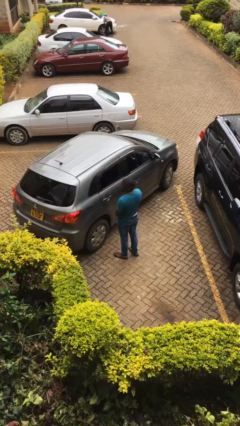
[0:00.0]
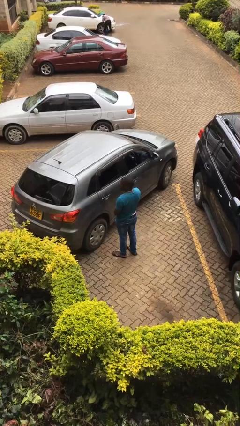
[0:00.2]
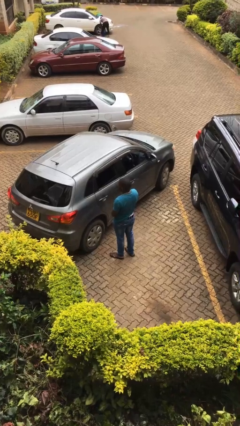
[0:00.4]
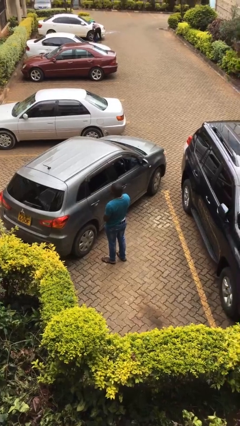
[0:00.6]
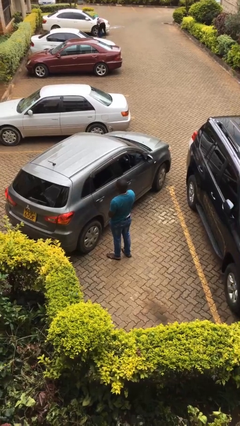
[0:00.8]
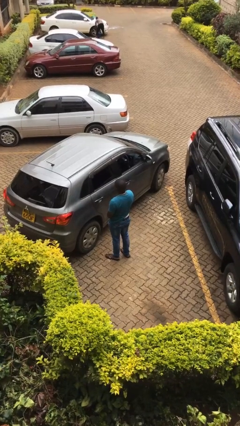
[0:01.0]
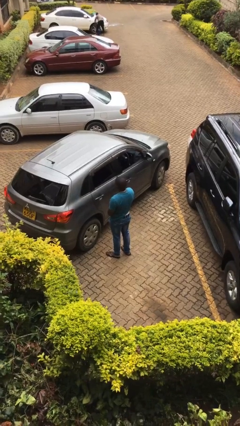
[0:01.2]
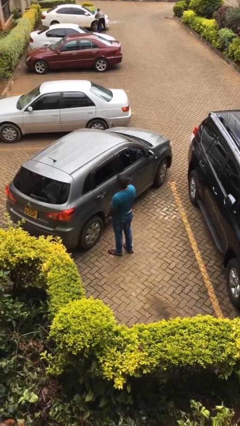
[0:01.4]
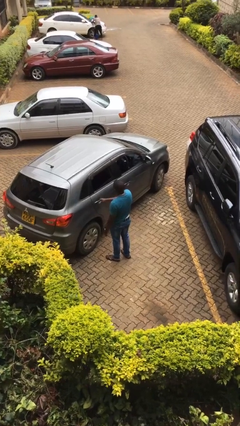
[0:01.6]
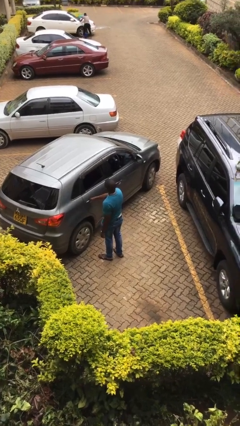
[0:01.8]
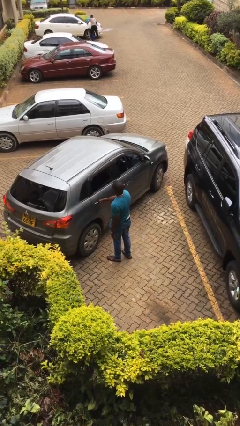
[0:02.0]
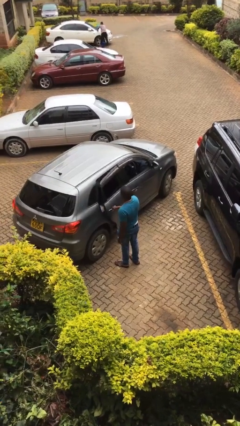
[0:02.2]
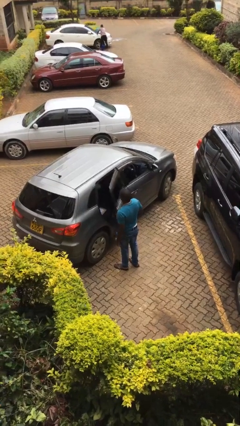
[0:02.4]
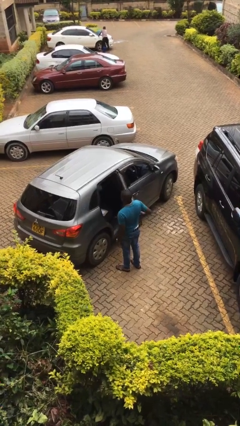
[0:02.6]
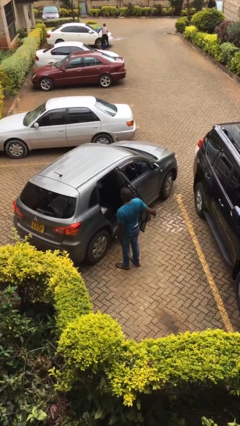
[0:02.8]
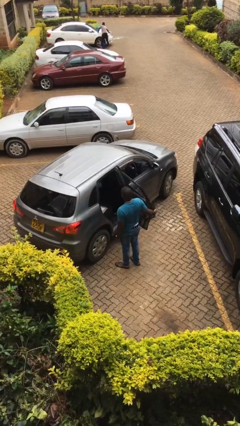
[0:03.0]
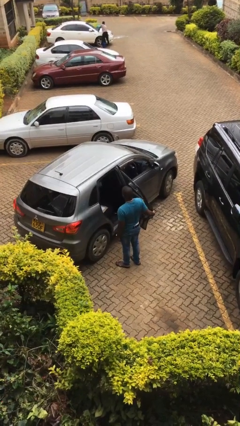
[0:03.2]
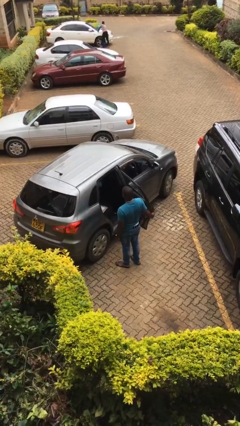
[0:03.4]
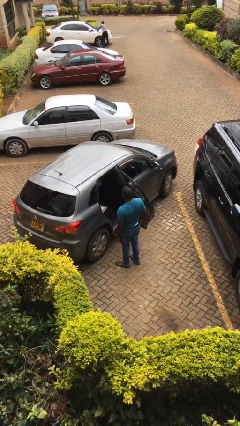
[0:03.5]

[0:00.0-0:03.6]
person opens car door

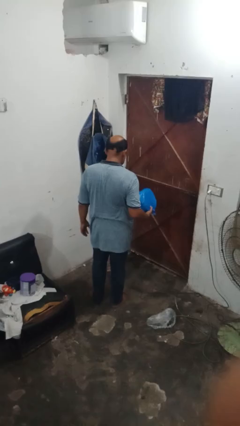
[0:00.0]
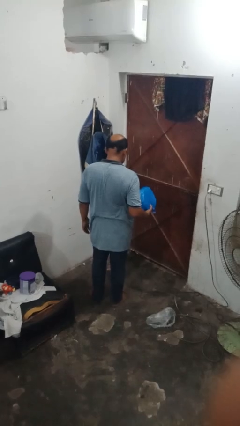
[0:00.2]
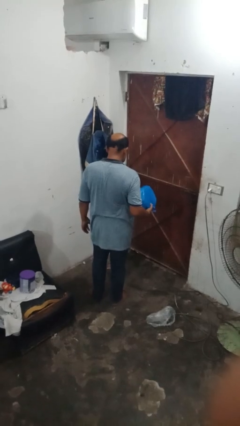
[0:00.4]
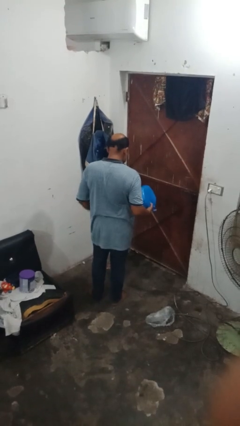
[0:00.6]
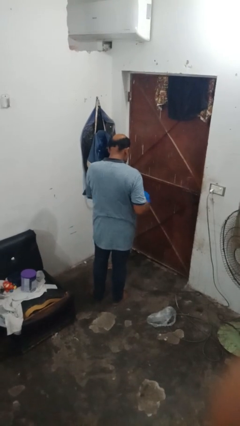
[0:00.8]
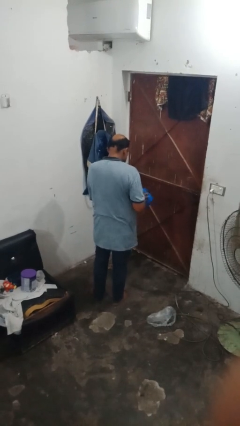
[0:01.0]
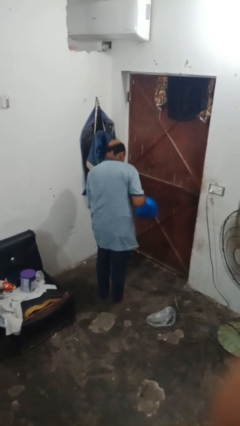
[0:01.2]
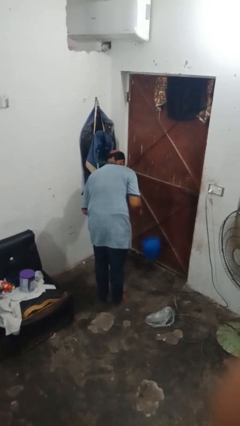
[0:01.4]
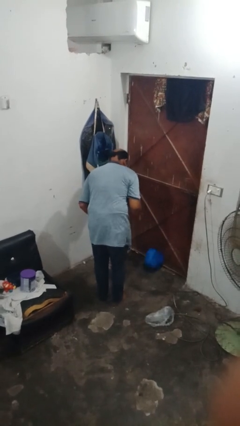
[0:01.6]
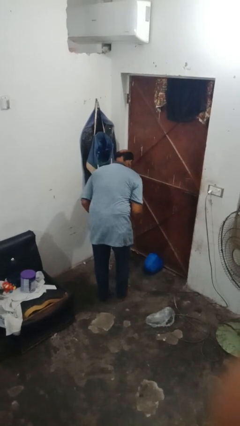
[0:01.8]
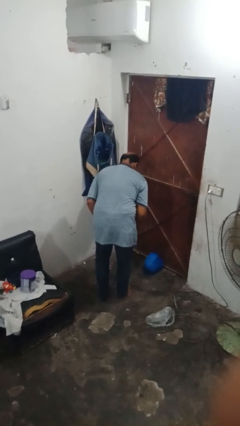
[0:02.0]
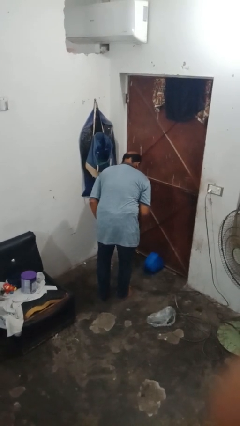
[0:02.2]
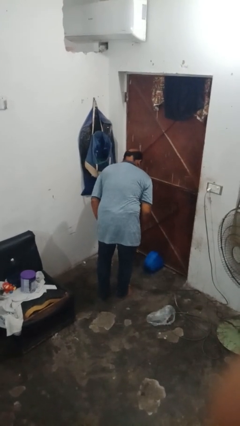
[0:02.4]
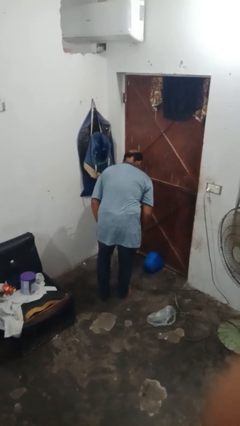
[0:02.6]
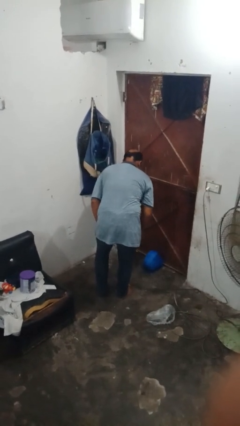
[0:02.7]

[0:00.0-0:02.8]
person trips on object on floor

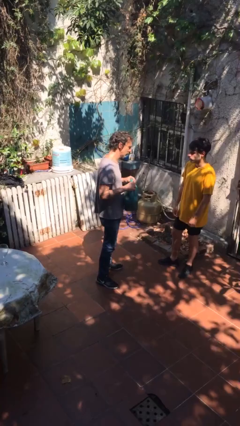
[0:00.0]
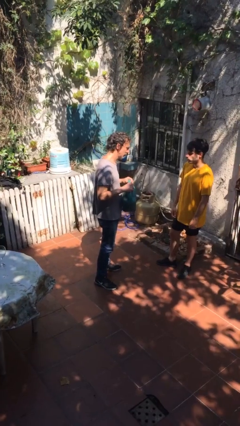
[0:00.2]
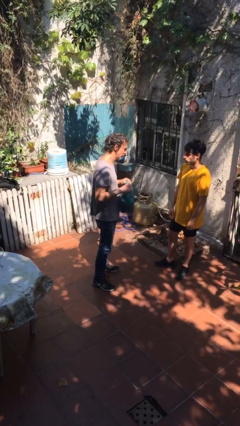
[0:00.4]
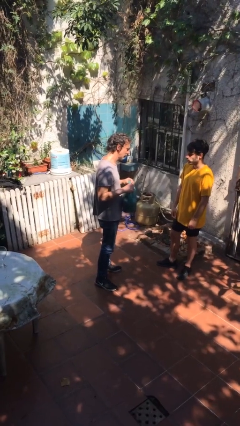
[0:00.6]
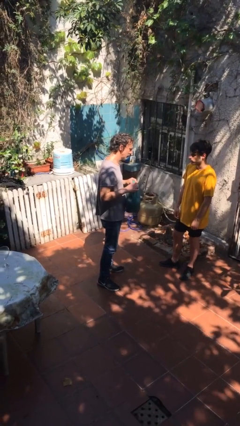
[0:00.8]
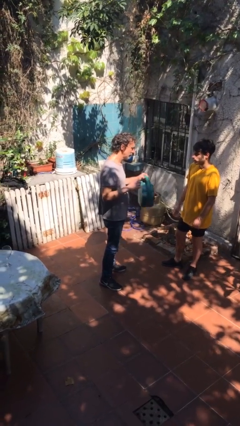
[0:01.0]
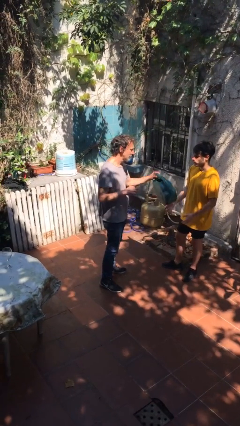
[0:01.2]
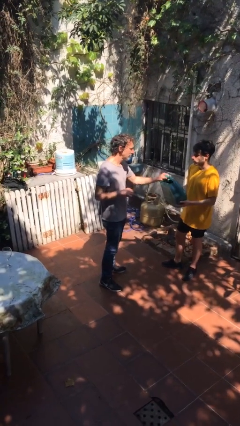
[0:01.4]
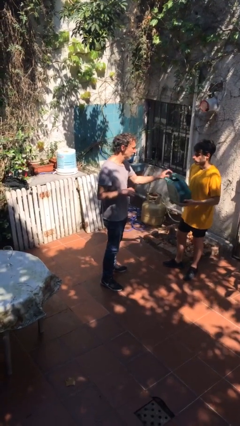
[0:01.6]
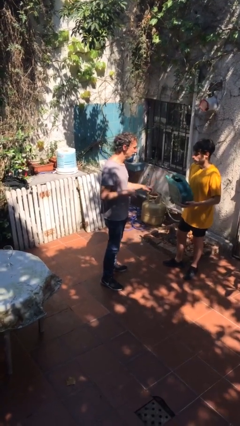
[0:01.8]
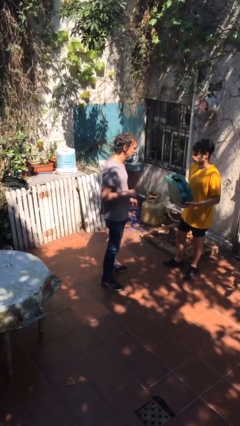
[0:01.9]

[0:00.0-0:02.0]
person transfers object to person

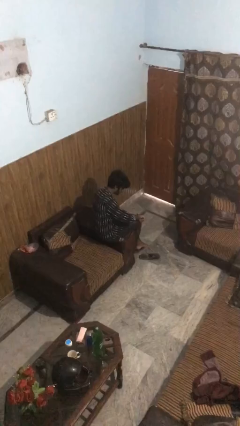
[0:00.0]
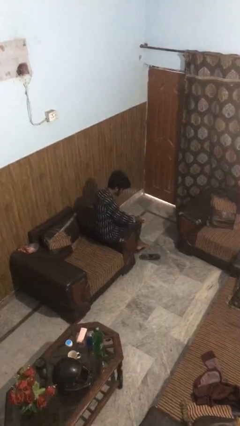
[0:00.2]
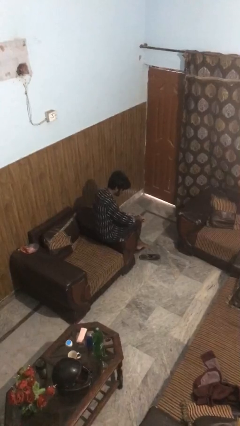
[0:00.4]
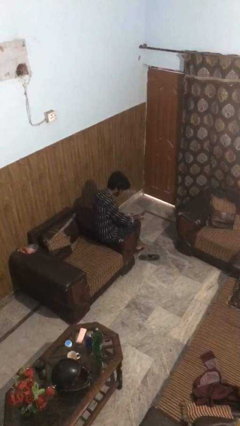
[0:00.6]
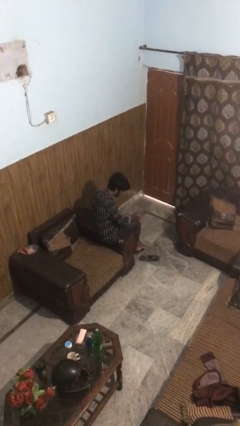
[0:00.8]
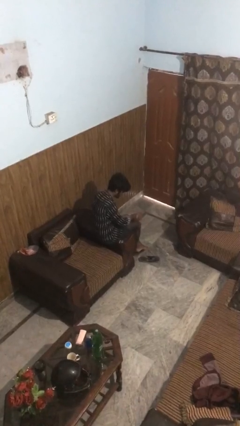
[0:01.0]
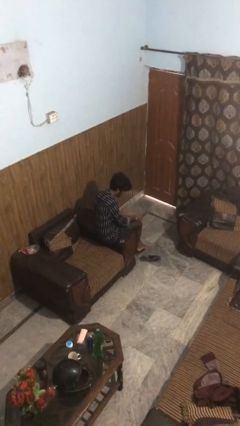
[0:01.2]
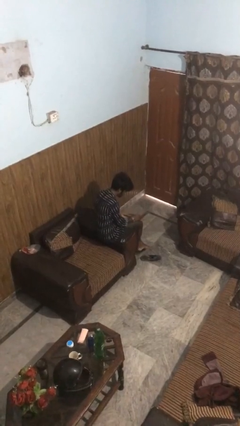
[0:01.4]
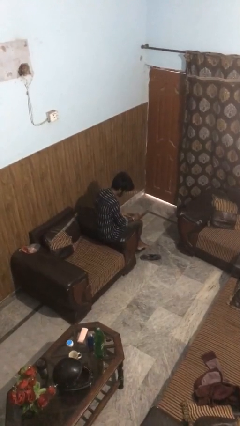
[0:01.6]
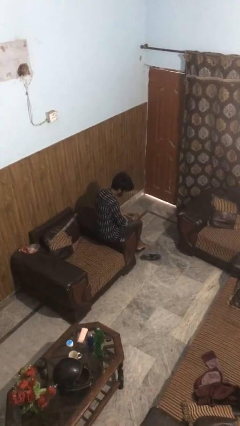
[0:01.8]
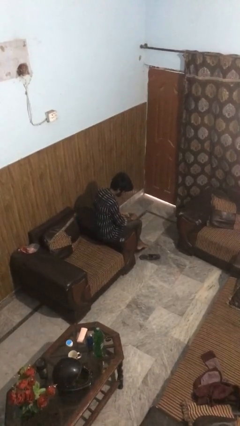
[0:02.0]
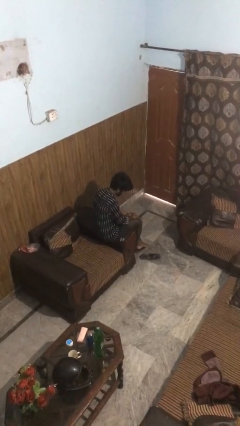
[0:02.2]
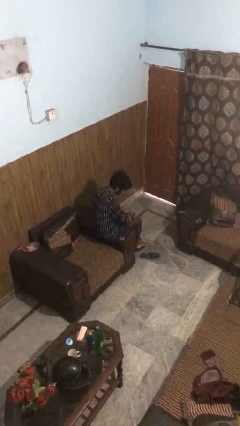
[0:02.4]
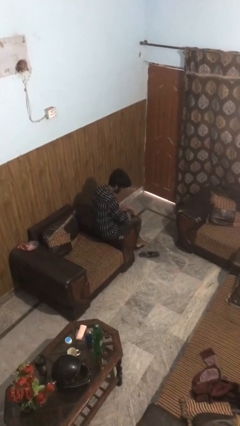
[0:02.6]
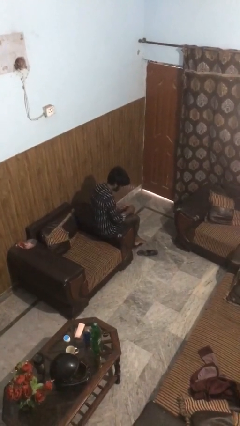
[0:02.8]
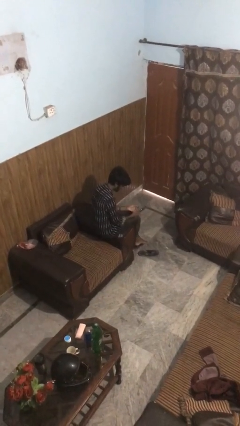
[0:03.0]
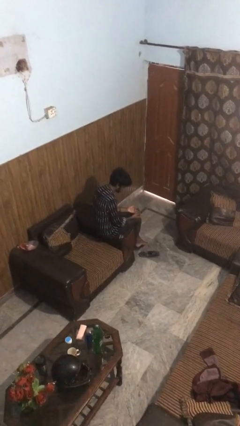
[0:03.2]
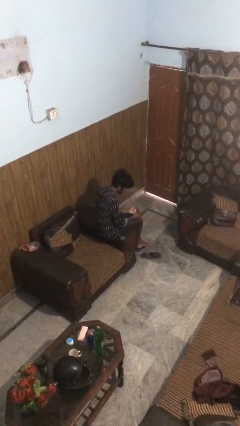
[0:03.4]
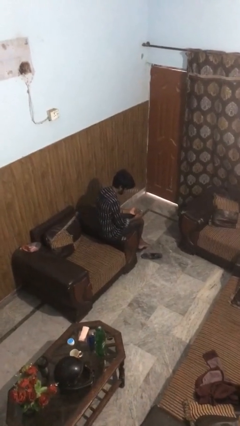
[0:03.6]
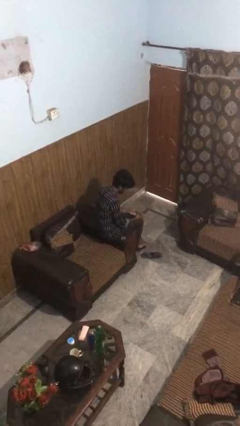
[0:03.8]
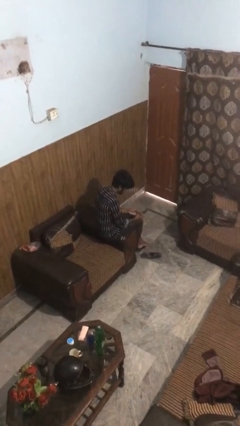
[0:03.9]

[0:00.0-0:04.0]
person takes off wristwatch

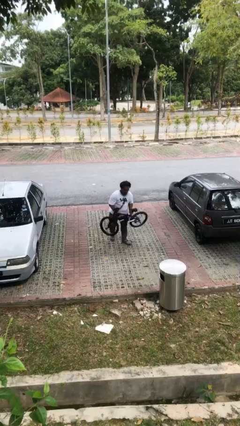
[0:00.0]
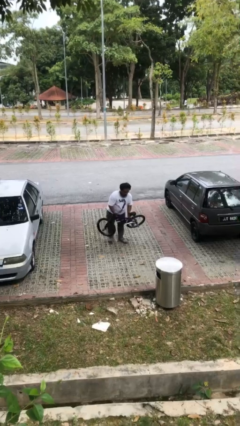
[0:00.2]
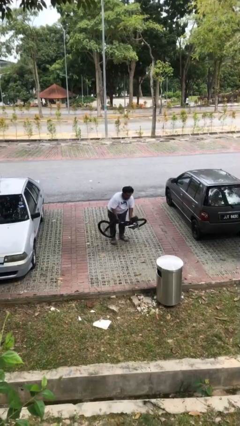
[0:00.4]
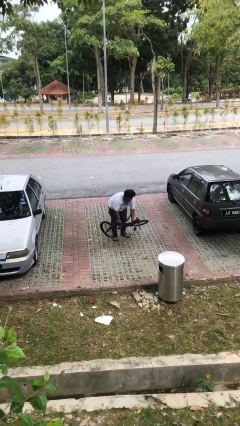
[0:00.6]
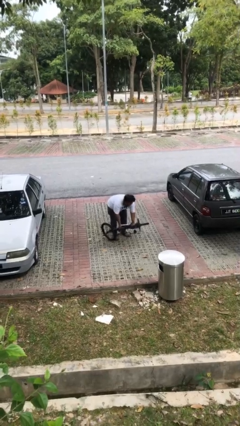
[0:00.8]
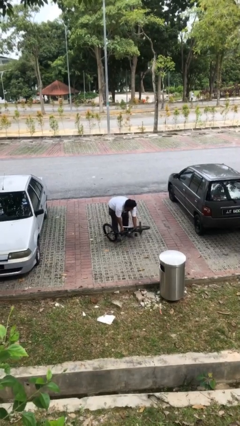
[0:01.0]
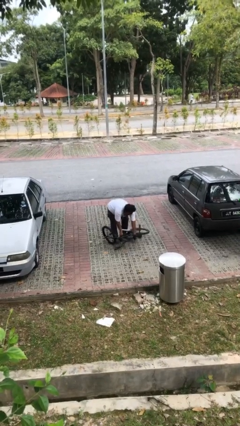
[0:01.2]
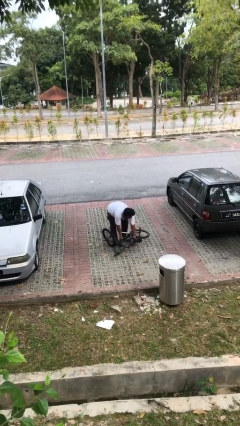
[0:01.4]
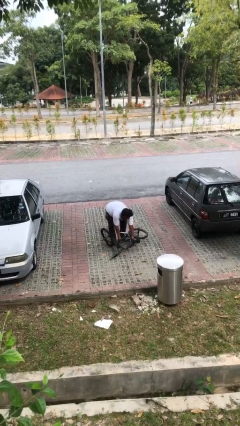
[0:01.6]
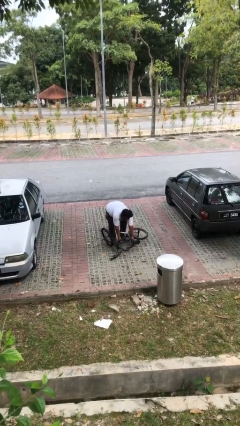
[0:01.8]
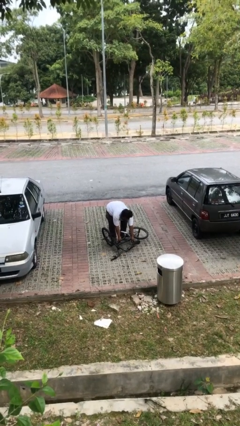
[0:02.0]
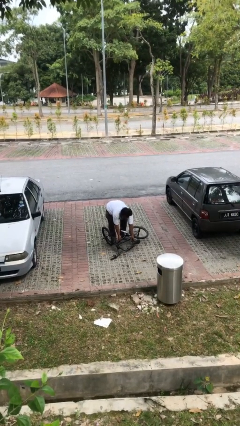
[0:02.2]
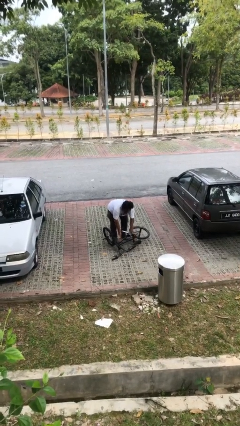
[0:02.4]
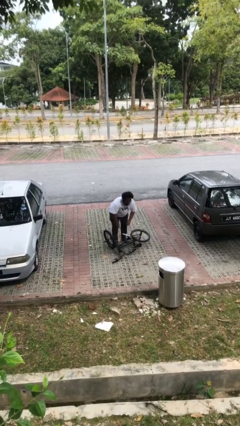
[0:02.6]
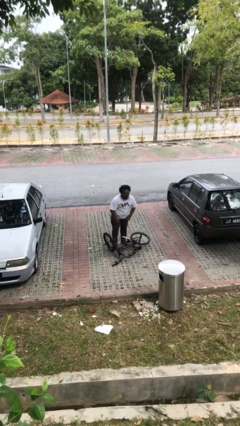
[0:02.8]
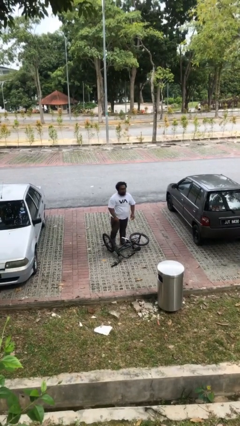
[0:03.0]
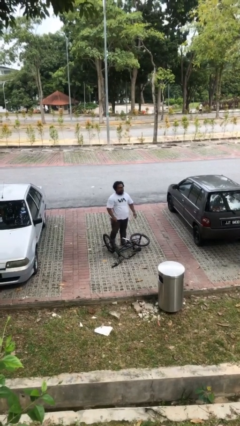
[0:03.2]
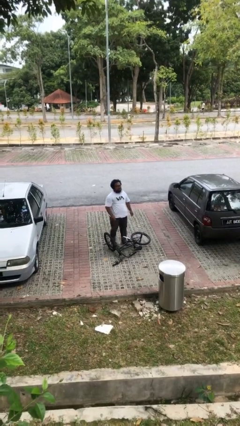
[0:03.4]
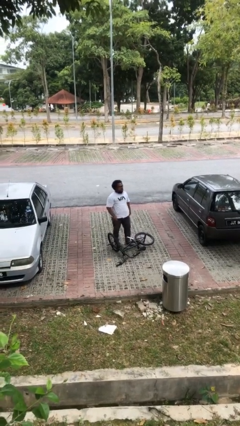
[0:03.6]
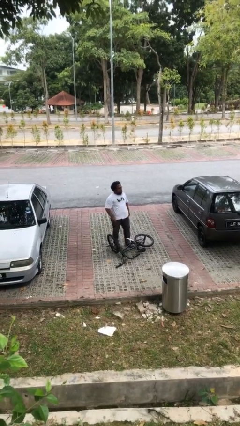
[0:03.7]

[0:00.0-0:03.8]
person puts down object on floor

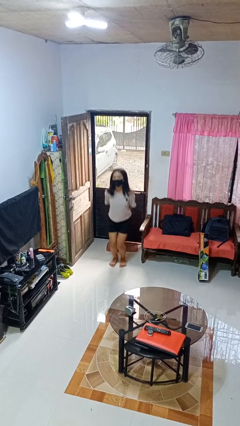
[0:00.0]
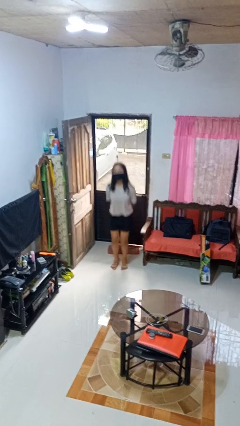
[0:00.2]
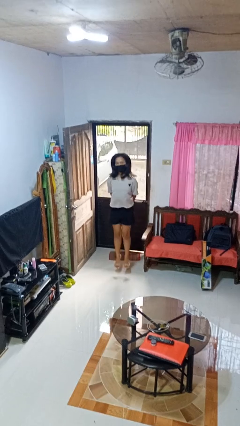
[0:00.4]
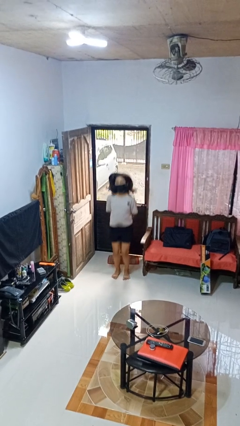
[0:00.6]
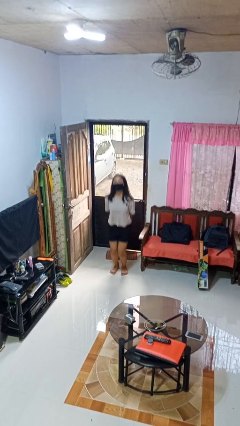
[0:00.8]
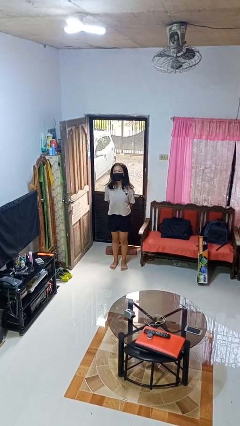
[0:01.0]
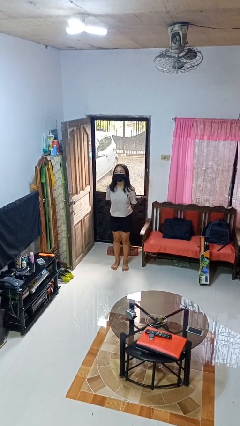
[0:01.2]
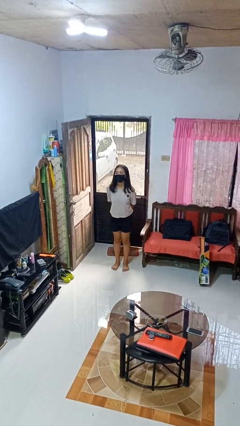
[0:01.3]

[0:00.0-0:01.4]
person jumps
